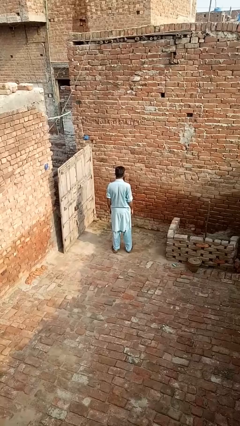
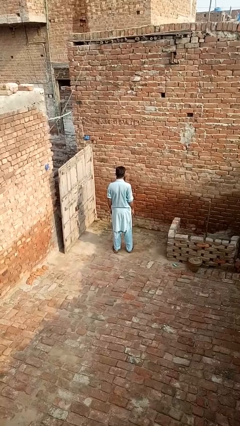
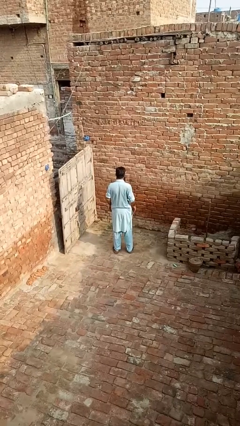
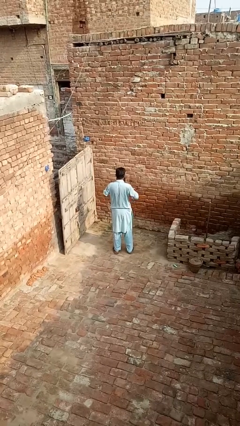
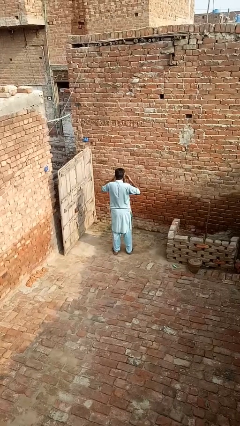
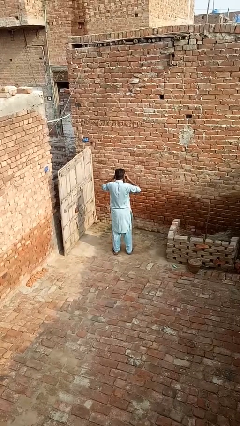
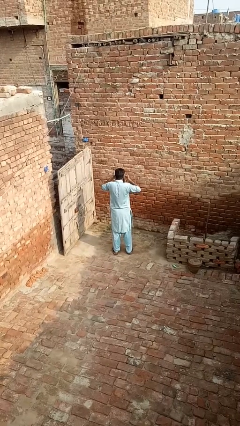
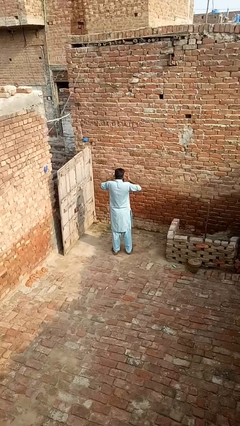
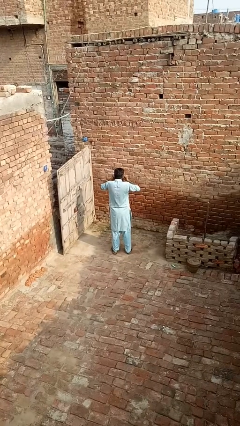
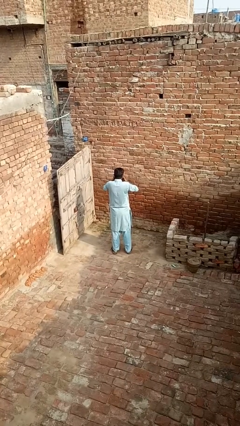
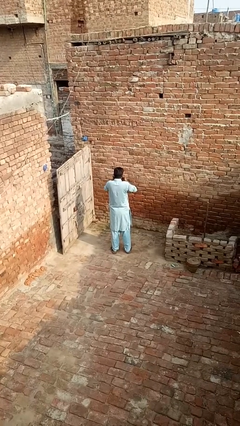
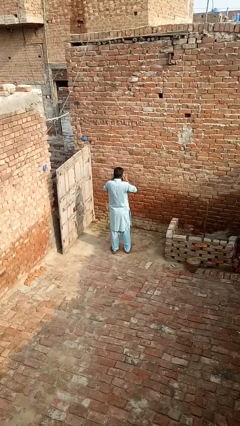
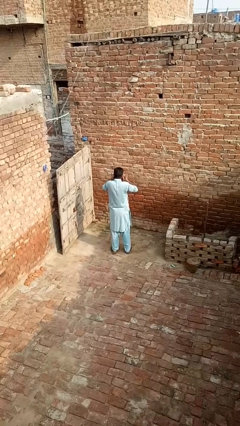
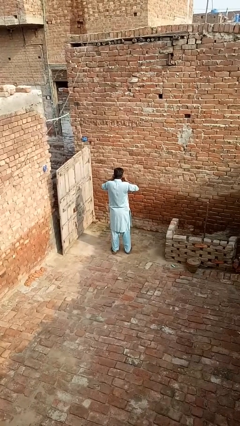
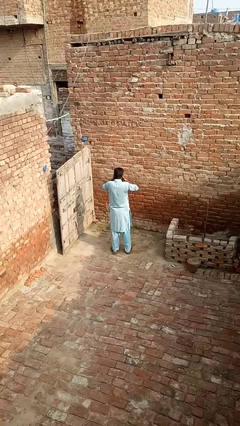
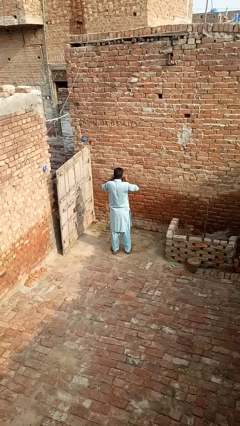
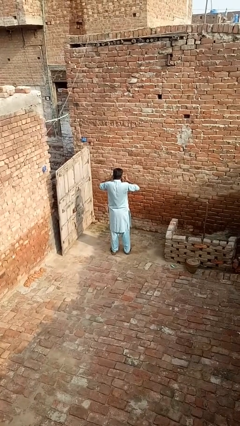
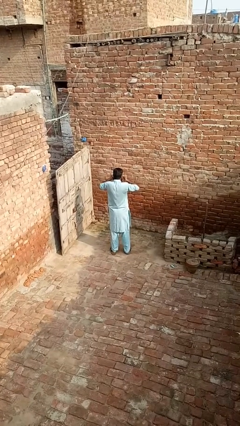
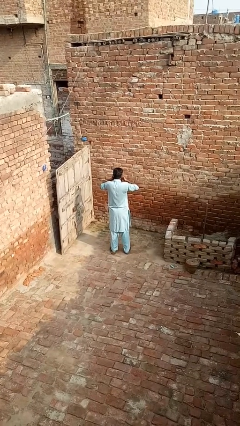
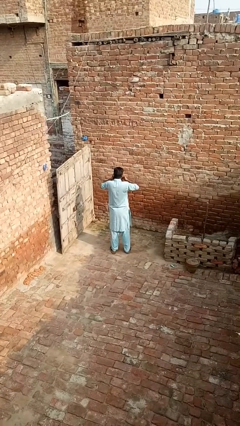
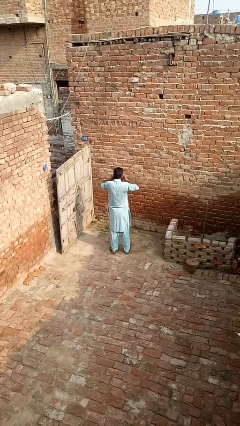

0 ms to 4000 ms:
person rubs eyes

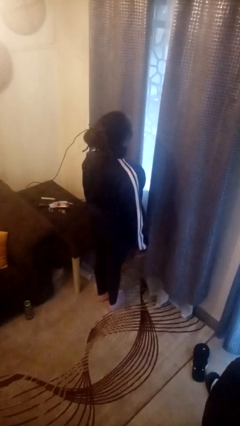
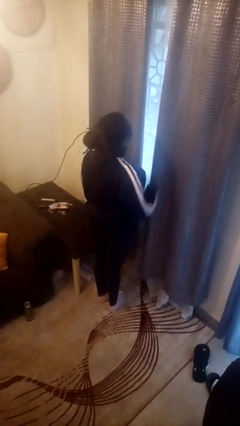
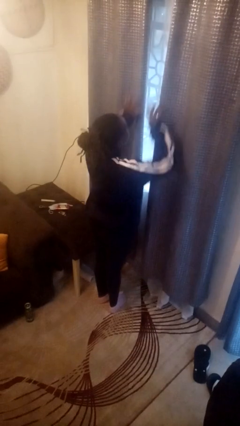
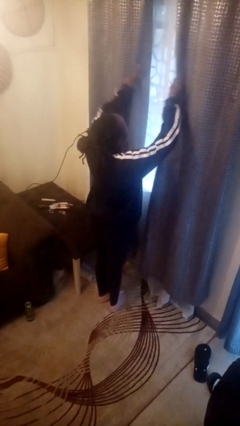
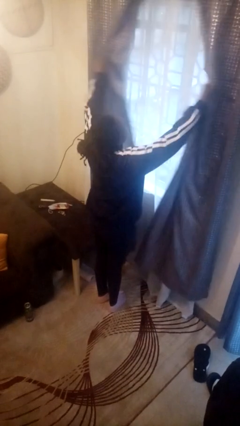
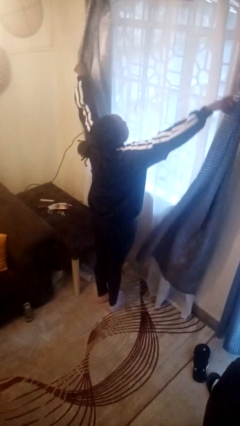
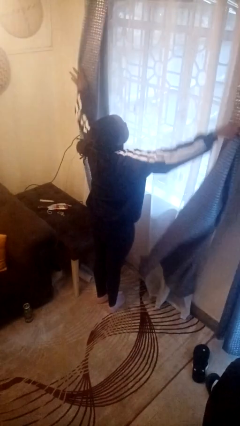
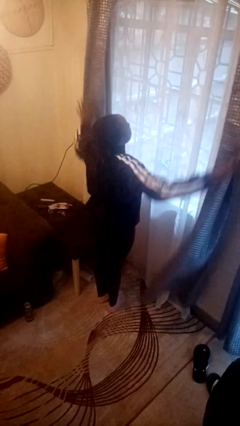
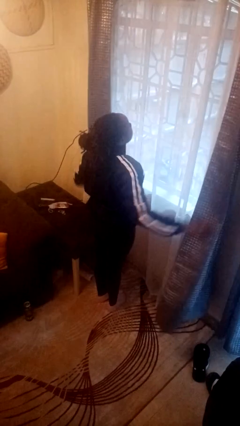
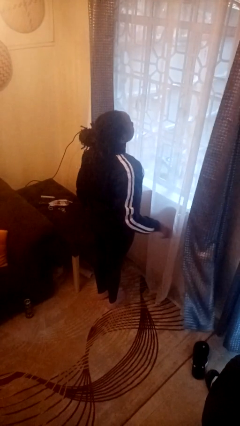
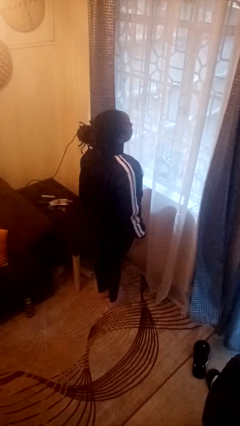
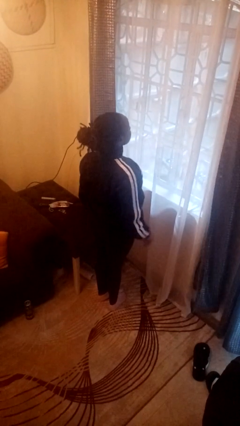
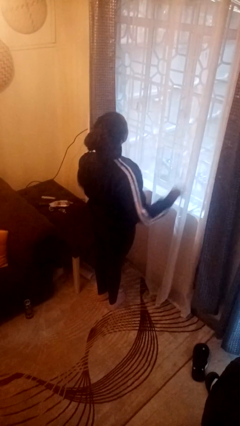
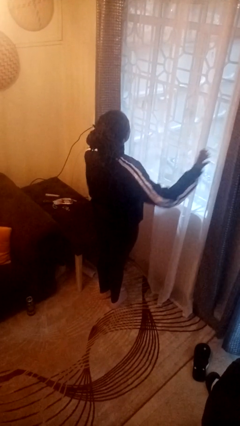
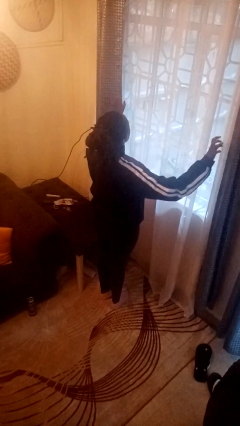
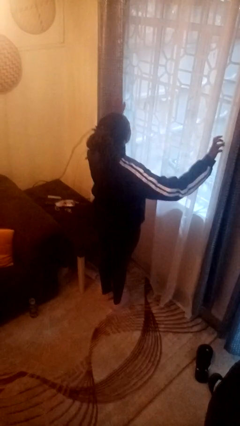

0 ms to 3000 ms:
person opens curtains

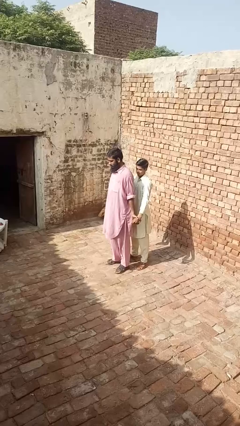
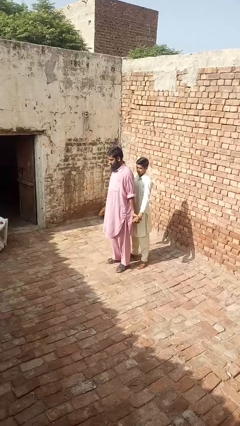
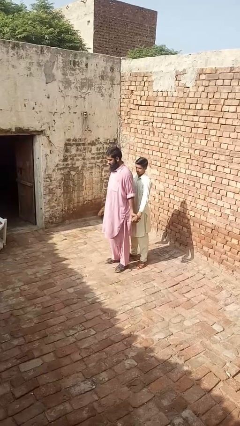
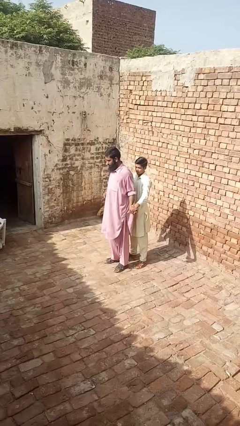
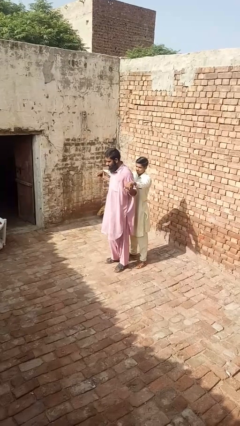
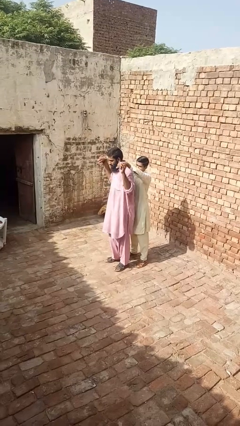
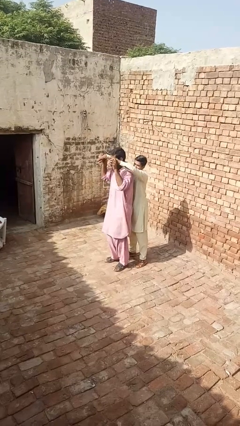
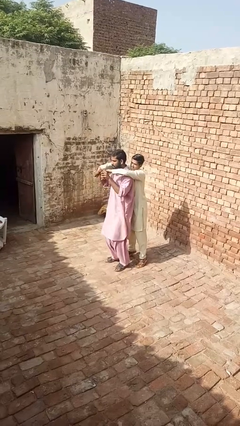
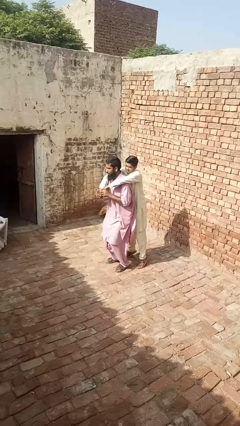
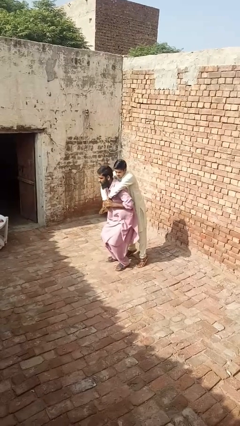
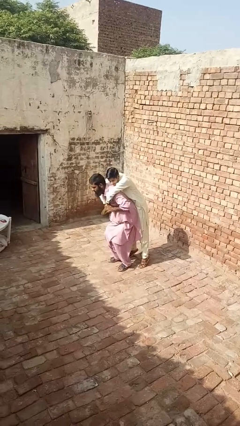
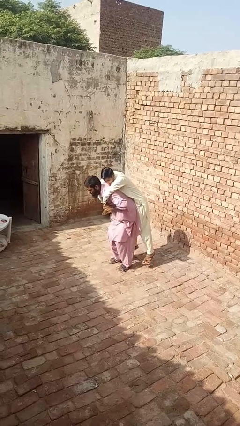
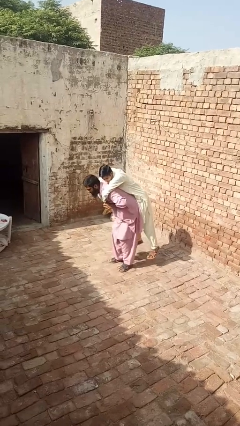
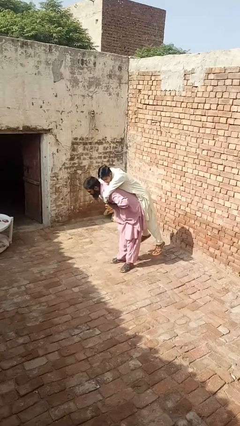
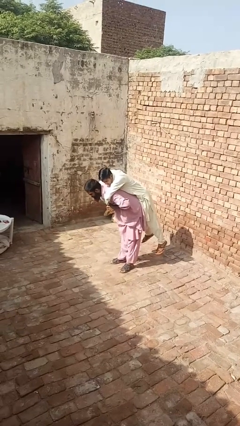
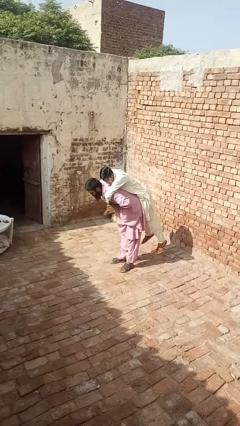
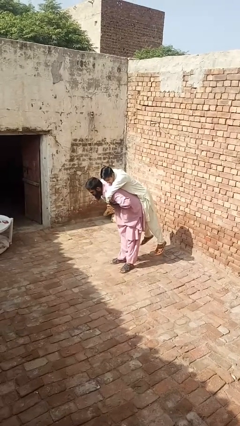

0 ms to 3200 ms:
person carries person over shoulder

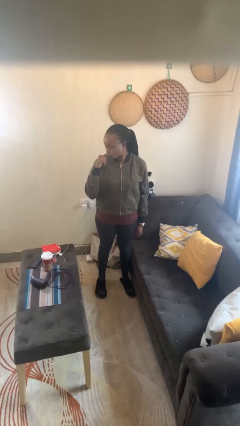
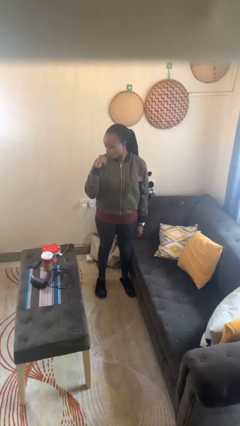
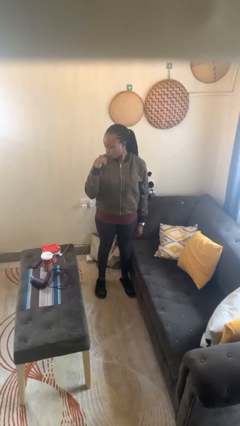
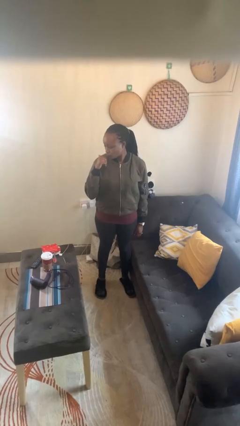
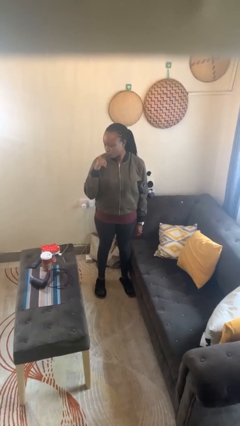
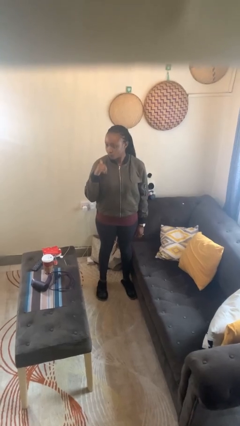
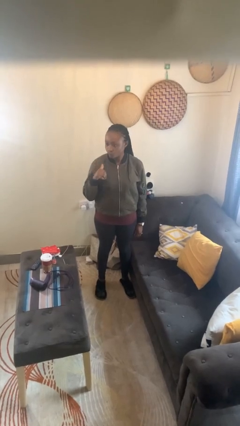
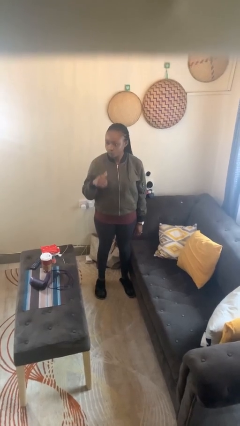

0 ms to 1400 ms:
person gestures behind me

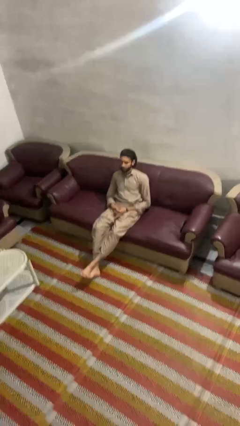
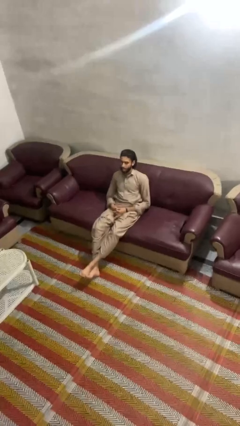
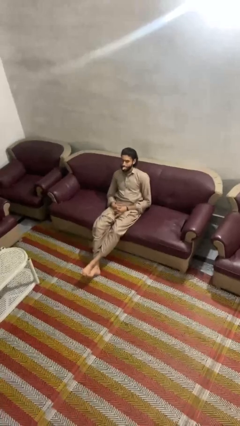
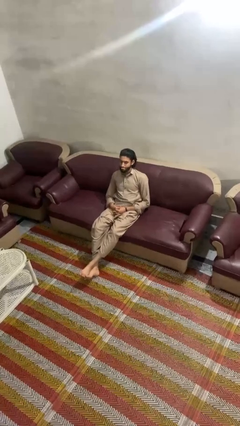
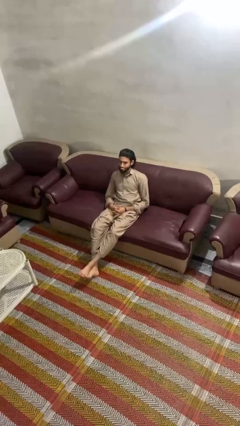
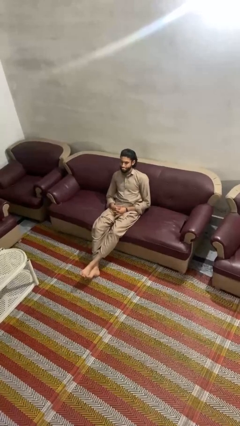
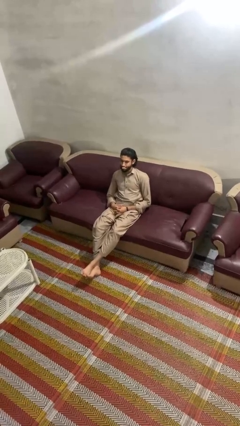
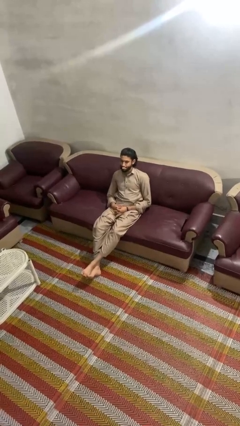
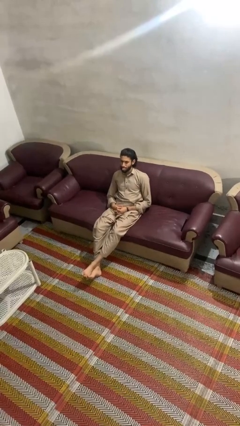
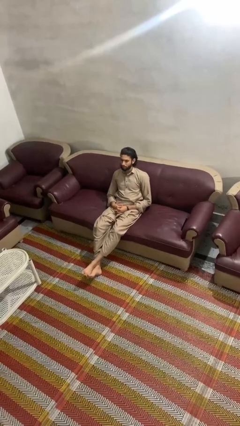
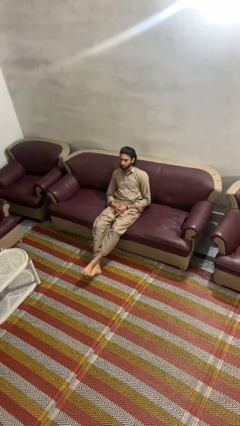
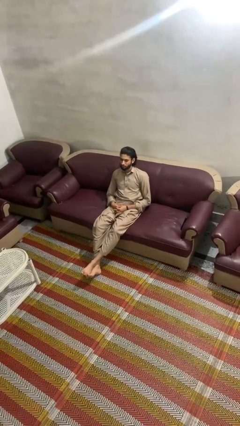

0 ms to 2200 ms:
person sticks out tongue

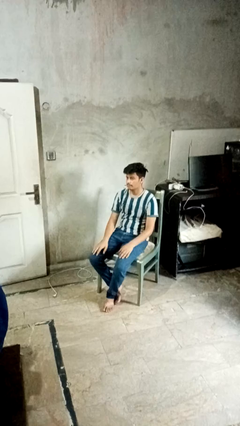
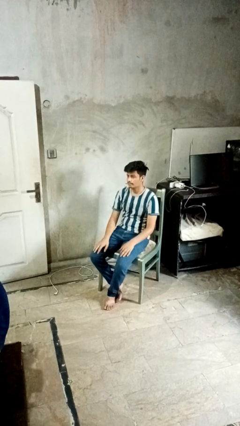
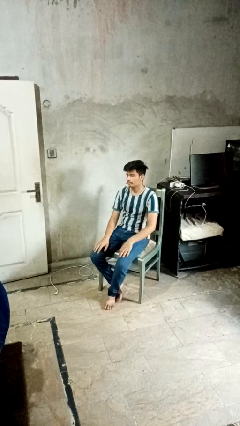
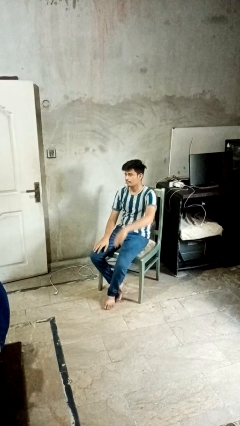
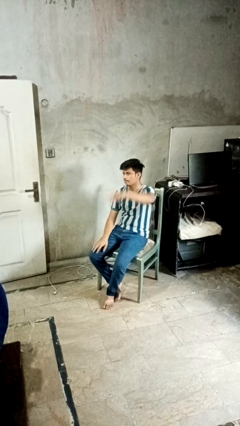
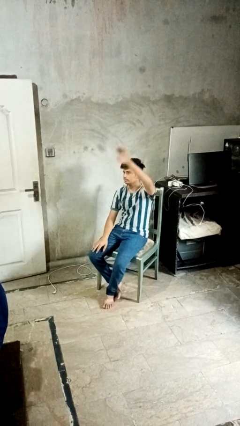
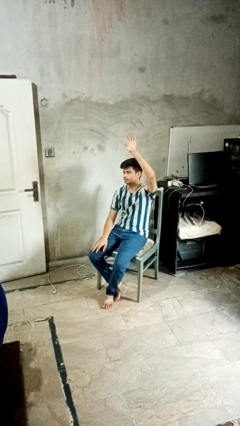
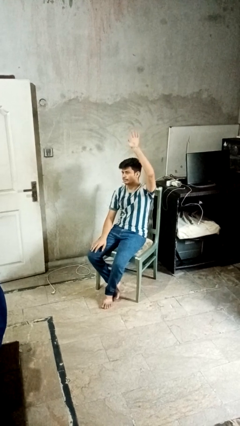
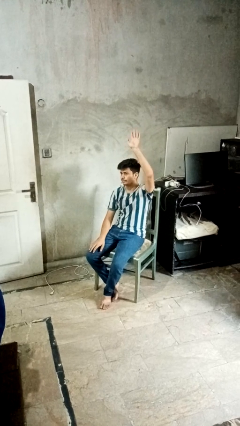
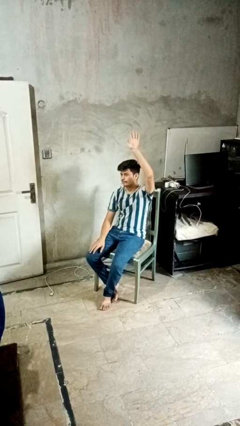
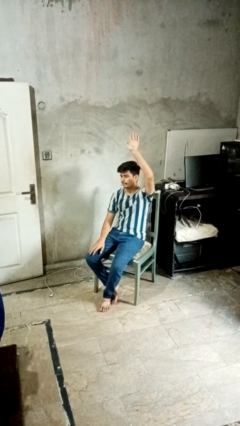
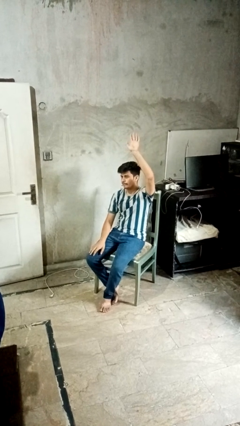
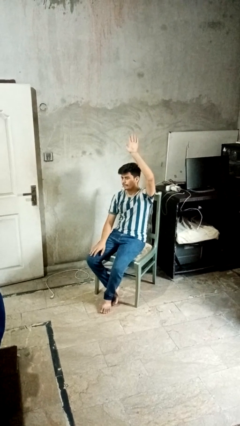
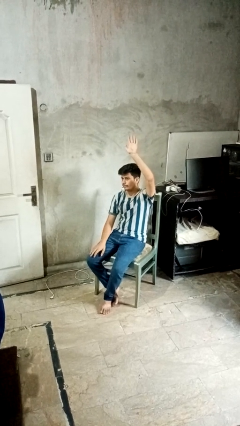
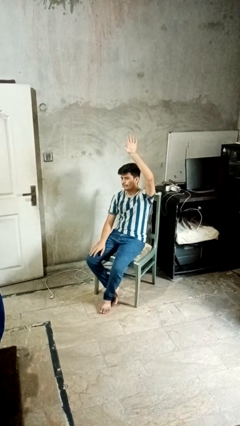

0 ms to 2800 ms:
person gestures raise hand

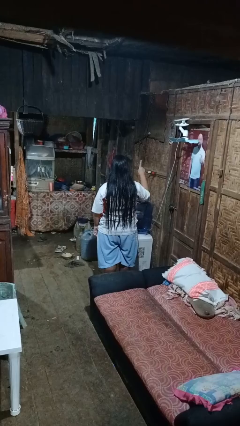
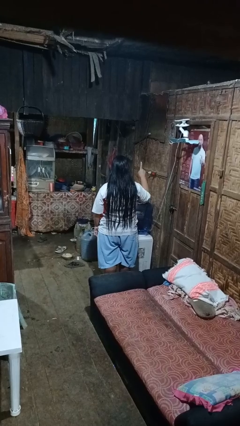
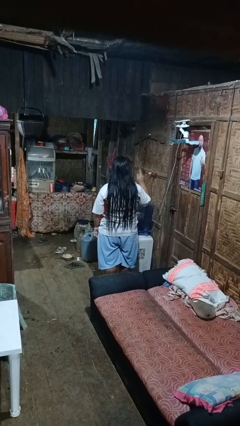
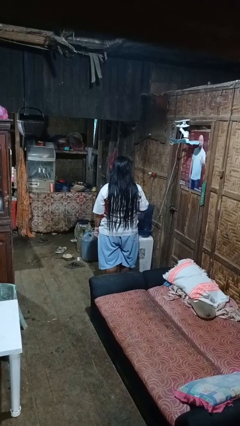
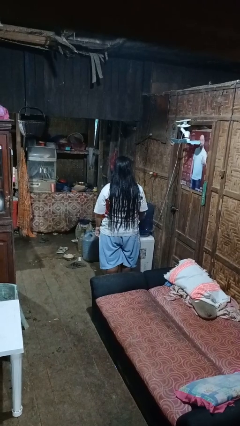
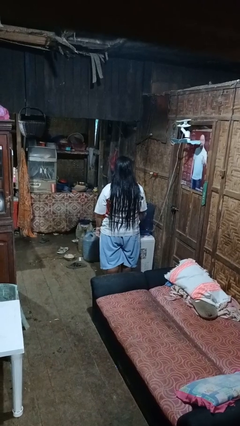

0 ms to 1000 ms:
person gestures number one
